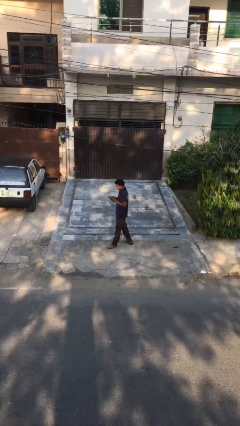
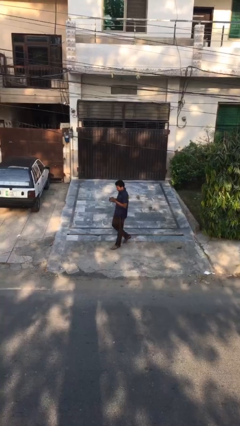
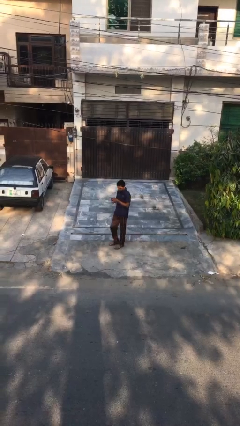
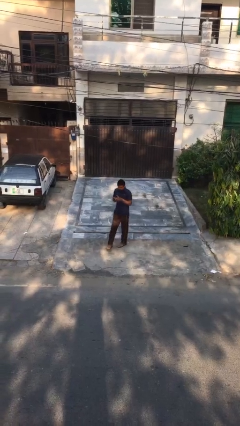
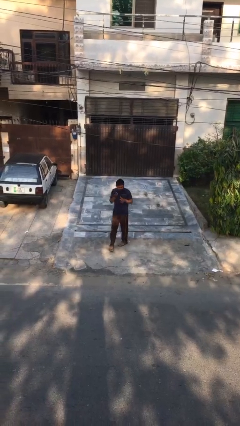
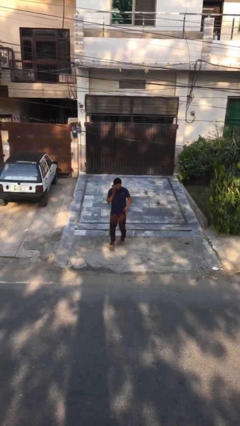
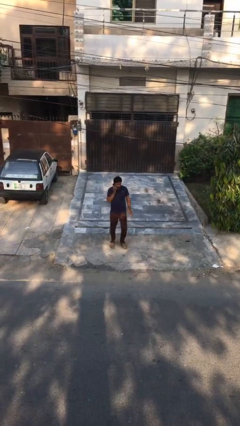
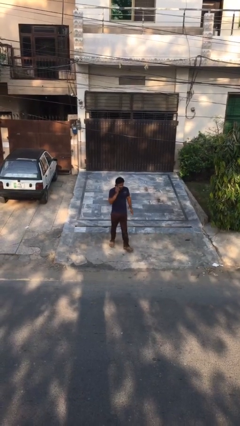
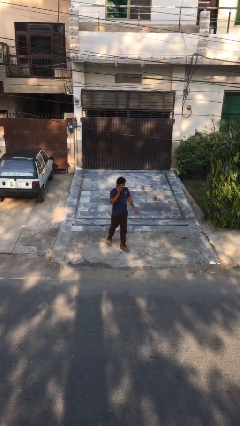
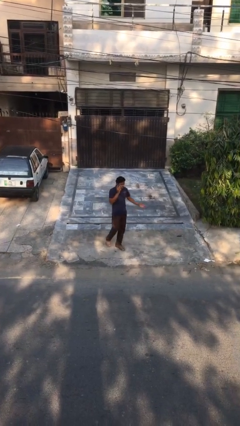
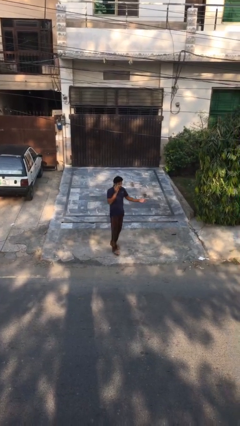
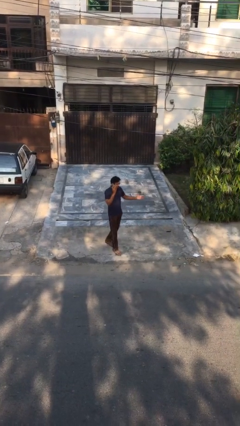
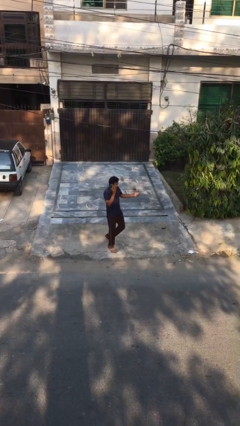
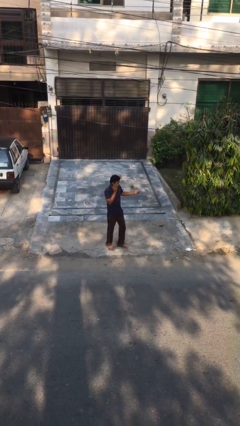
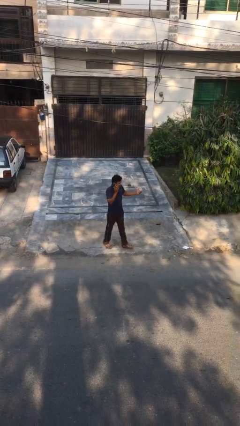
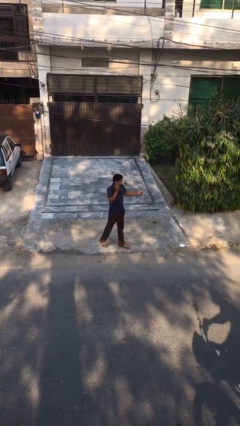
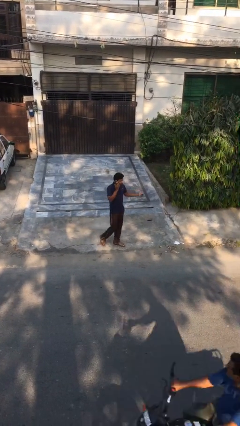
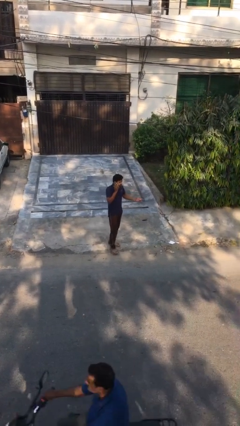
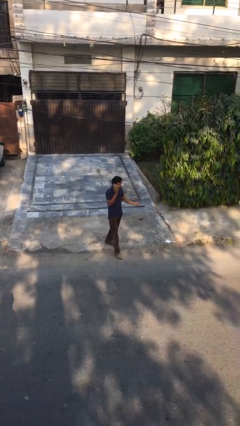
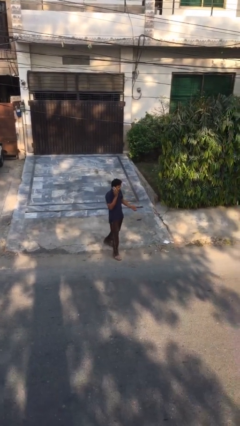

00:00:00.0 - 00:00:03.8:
person talks on phone

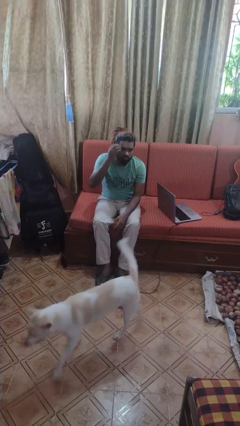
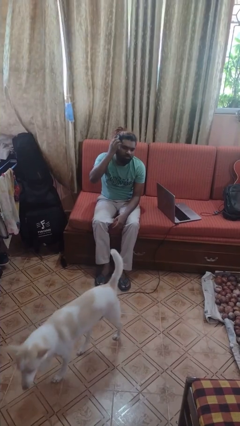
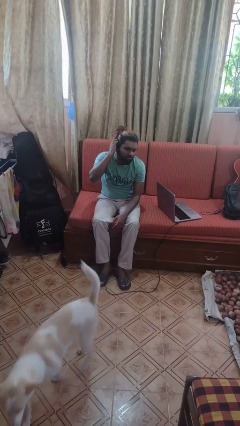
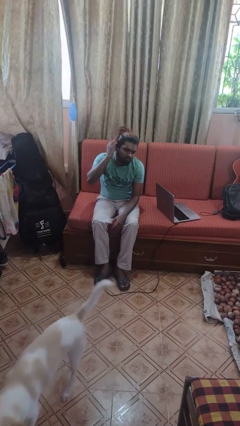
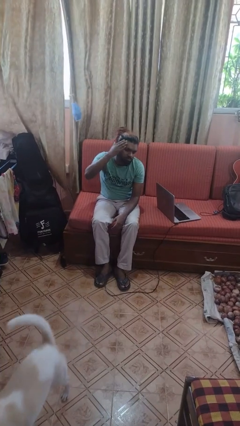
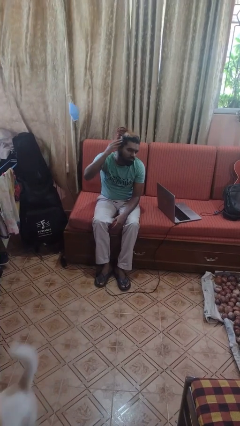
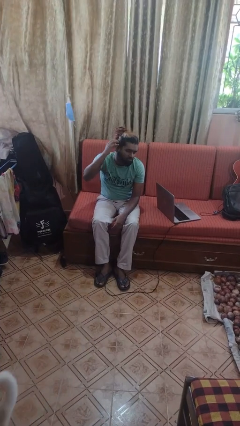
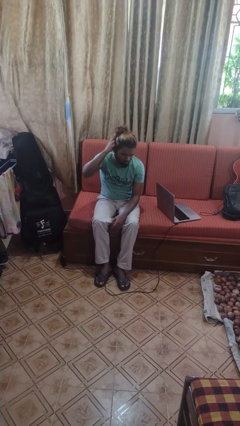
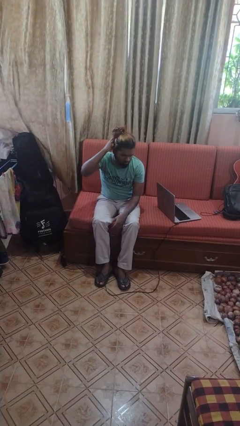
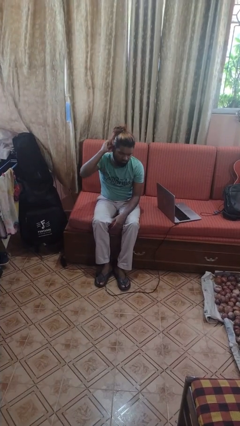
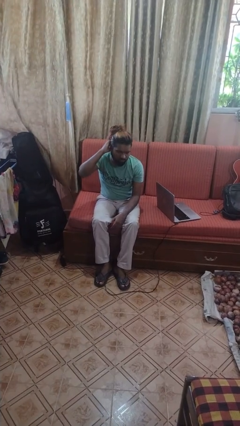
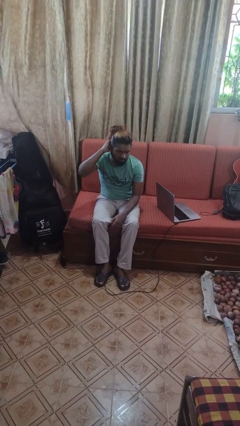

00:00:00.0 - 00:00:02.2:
person strokes hair

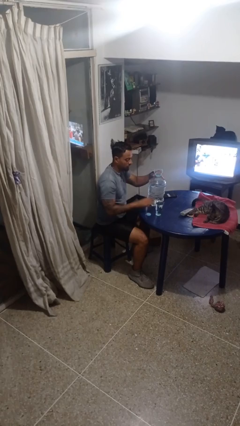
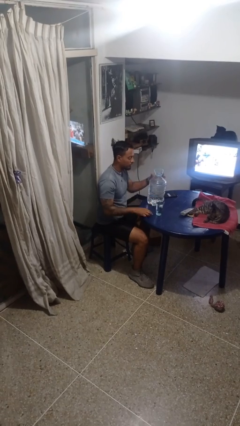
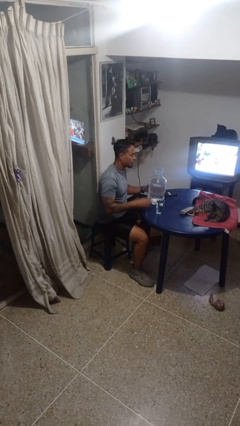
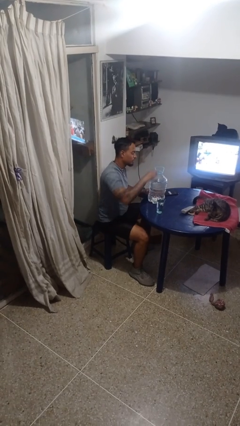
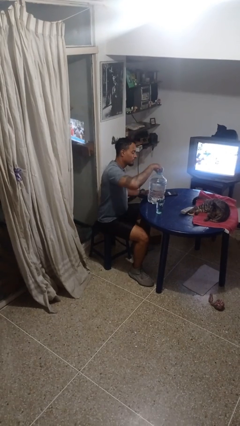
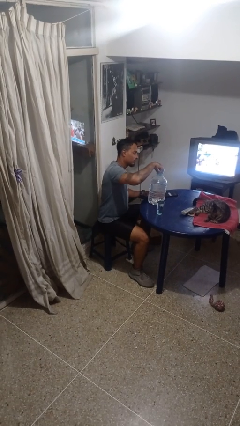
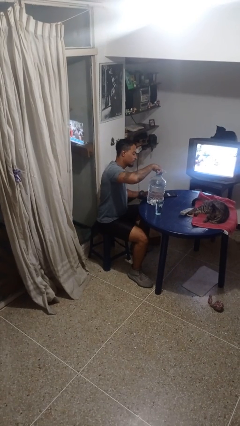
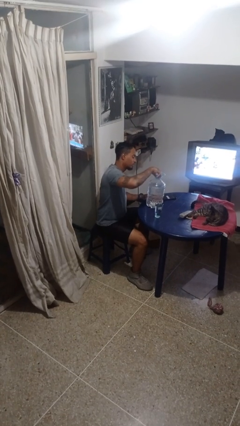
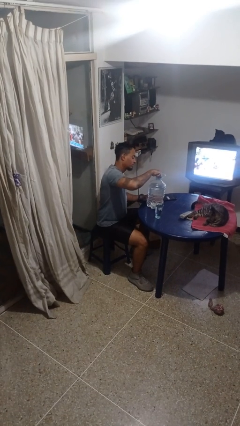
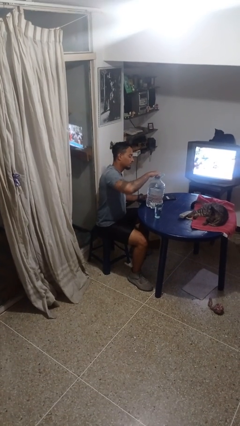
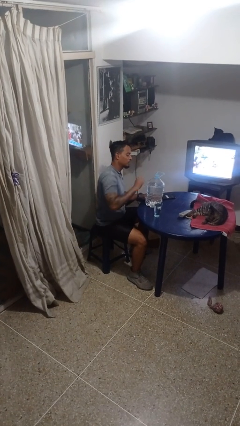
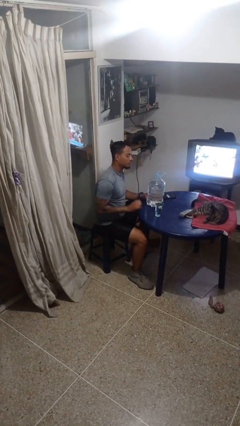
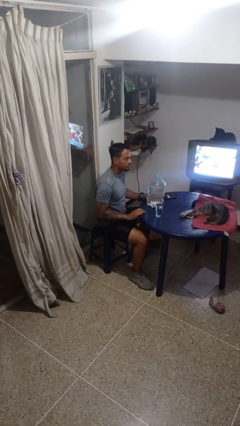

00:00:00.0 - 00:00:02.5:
person screws lid to bottle

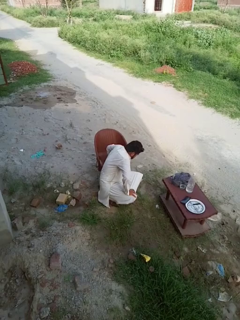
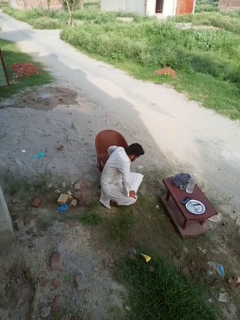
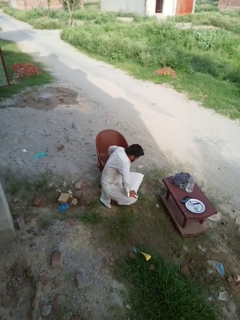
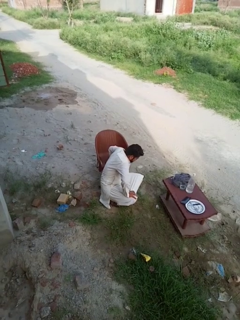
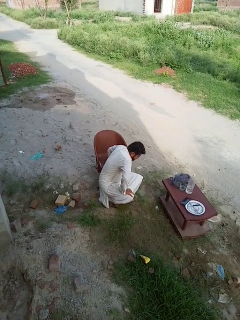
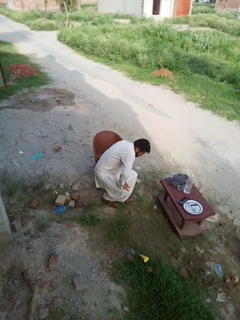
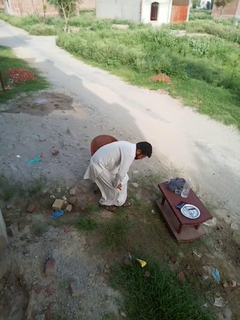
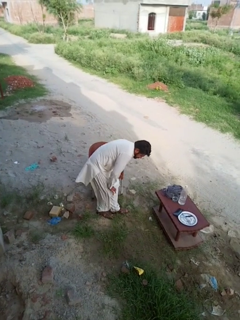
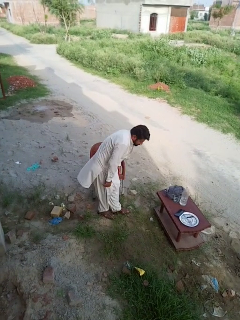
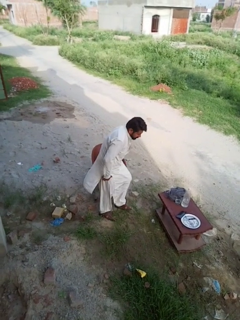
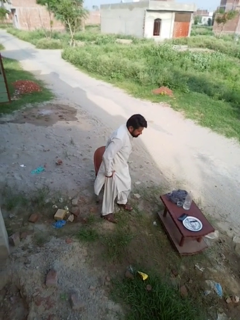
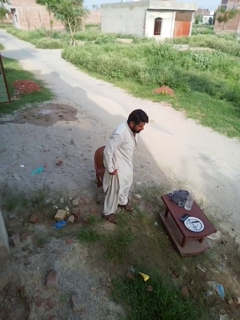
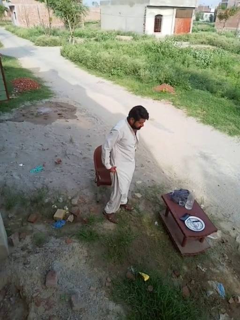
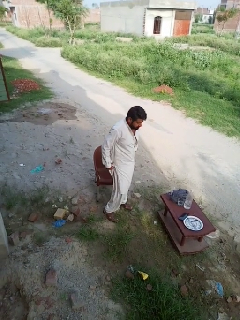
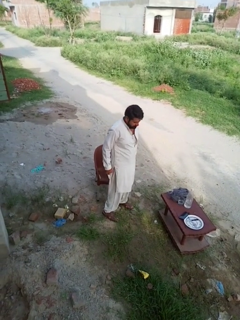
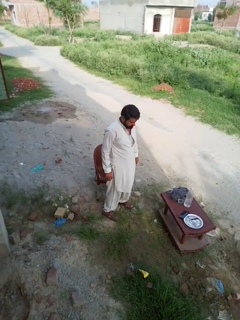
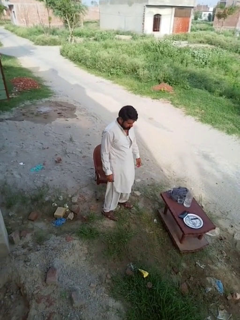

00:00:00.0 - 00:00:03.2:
person stands up from floor

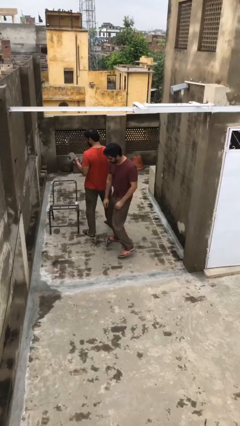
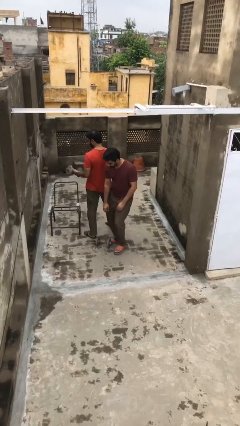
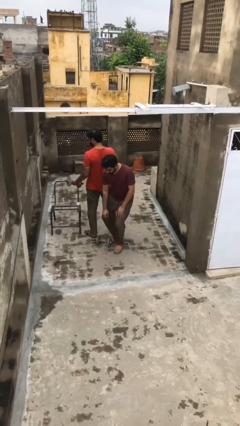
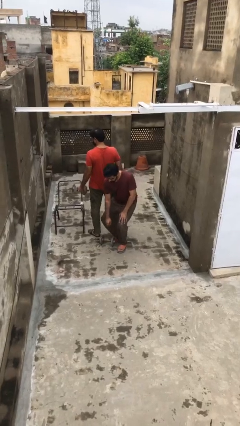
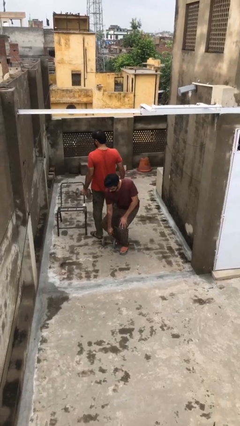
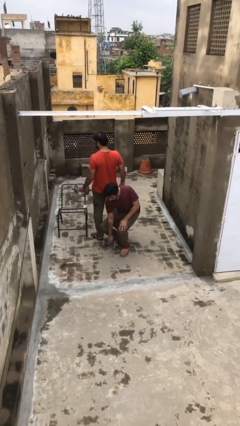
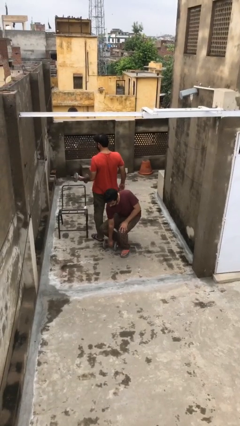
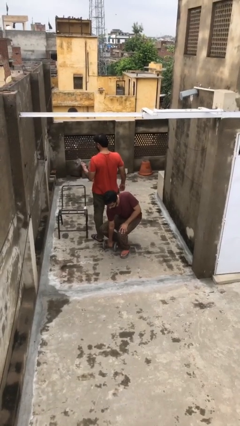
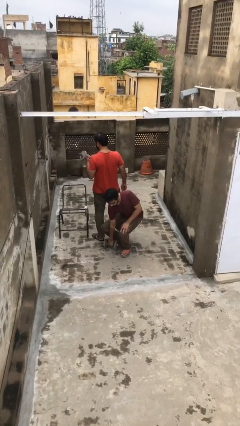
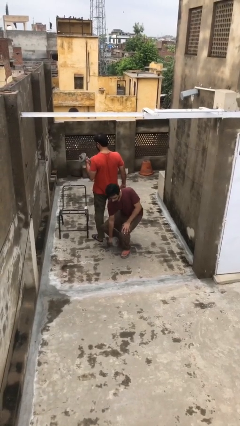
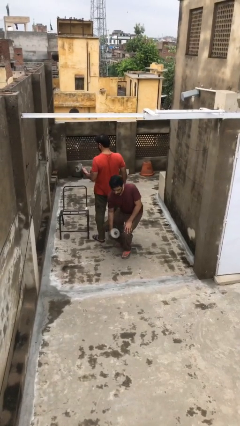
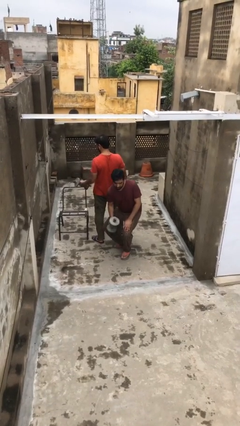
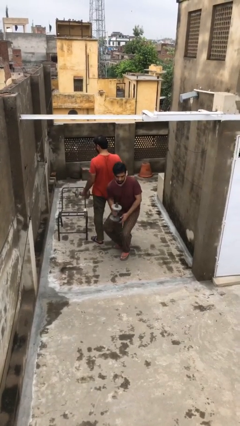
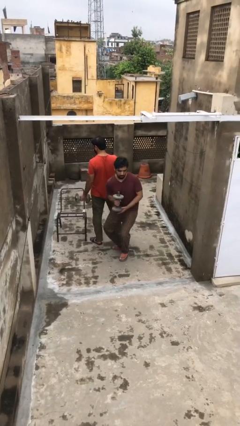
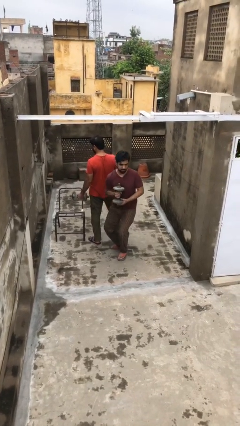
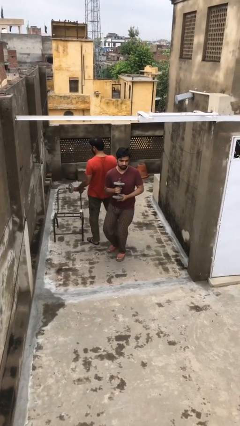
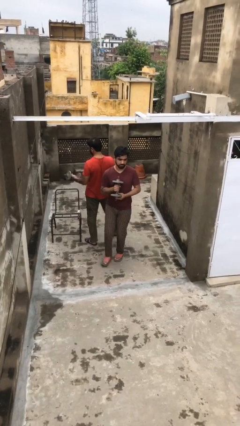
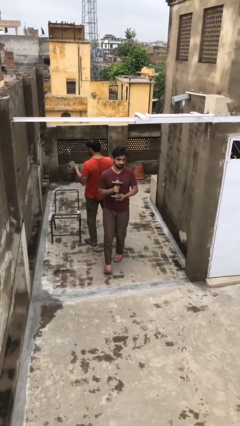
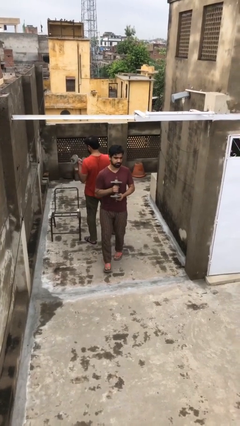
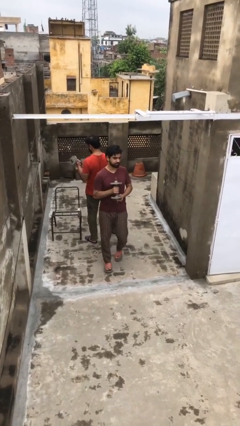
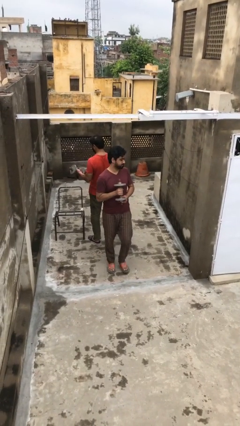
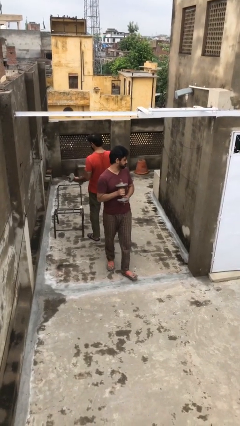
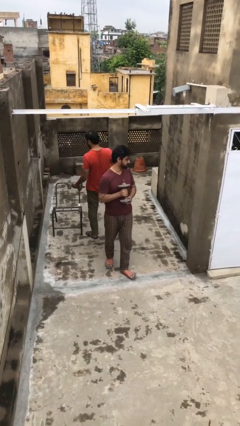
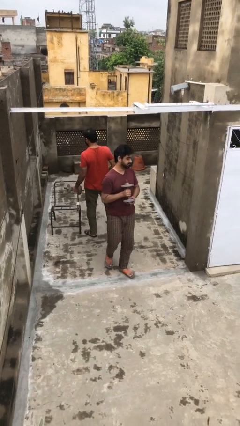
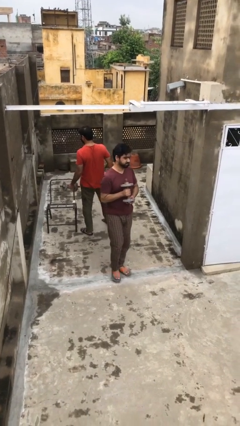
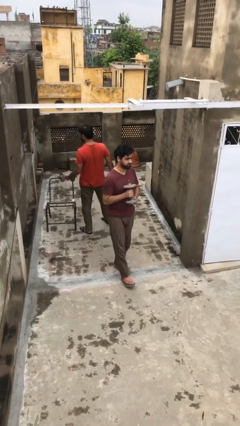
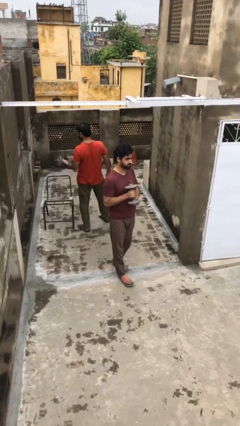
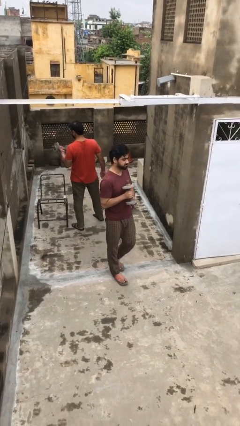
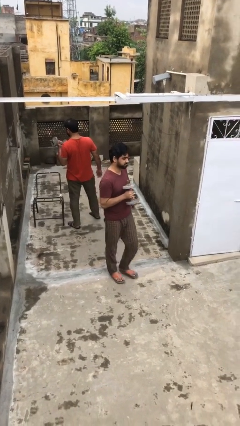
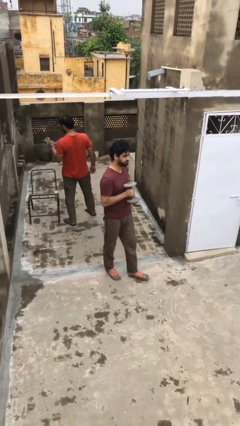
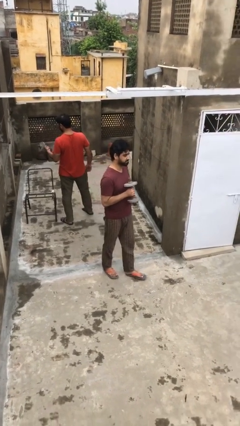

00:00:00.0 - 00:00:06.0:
person steals object from person

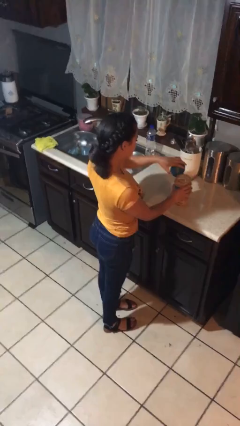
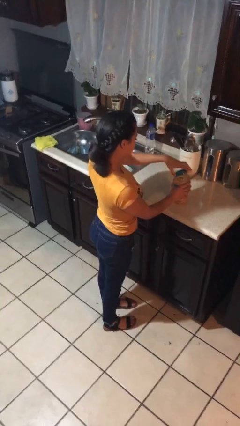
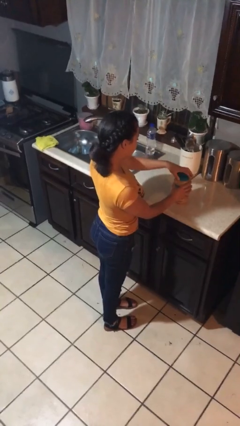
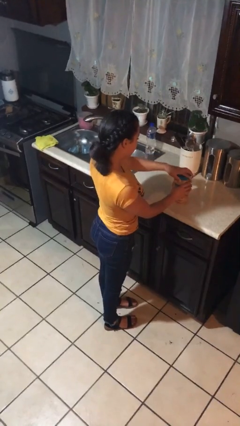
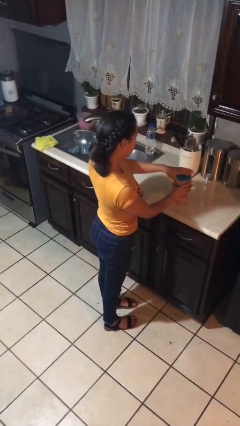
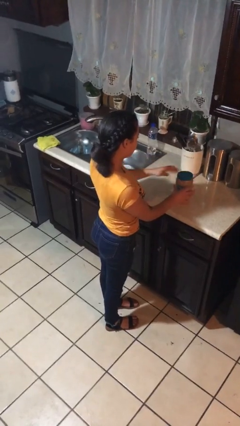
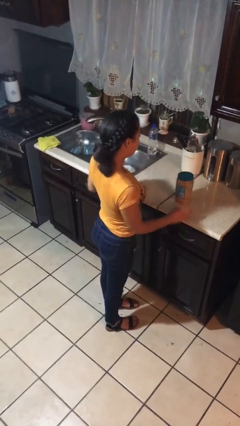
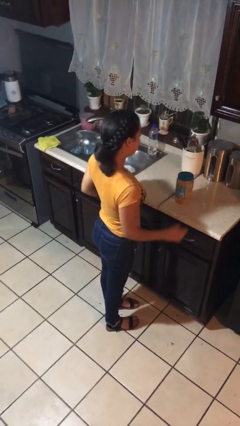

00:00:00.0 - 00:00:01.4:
person closes jar
